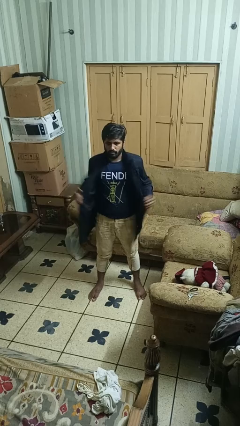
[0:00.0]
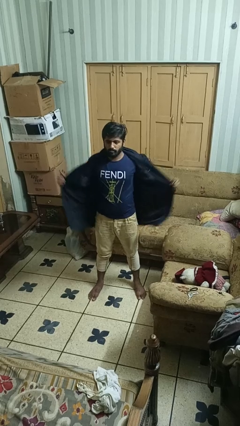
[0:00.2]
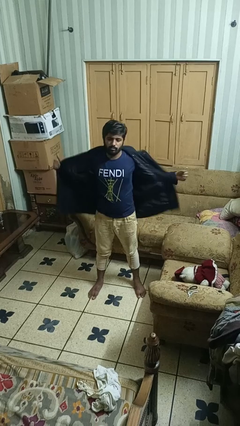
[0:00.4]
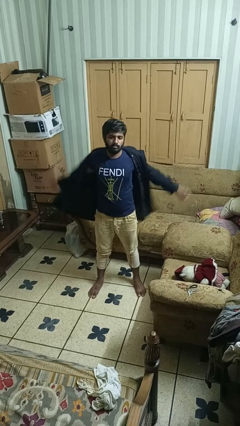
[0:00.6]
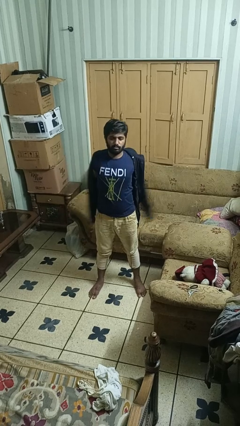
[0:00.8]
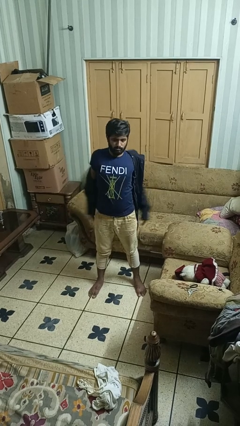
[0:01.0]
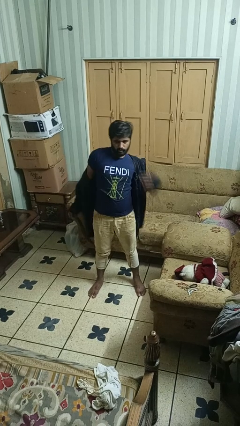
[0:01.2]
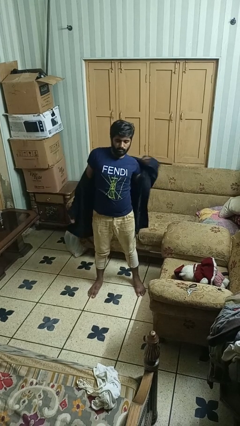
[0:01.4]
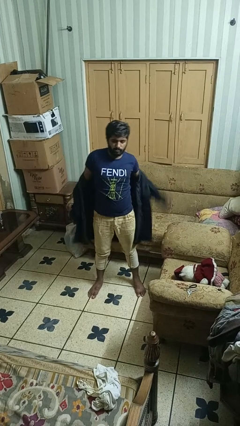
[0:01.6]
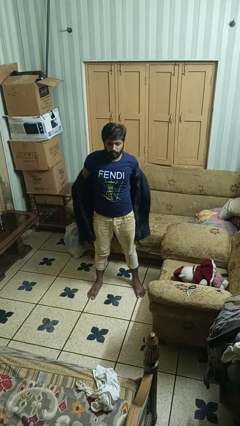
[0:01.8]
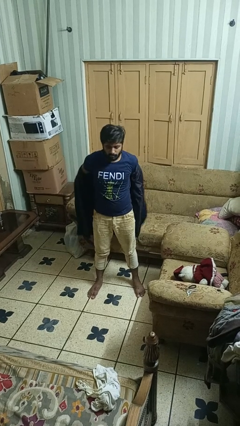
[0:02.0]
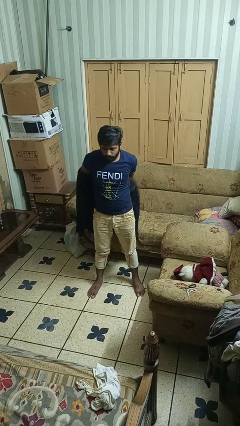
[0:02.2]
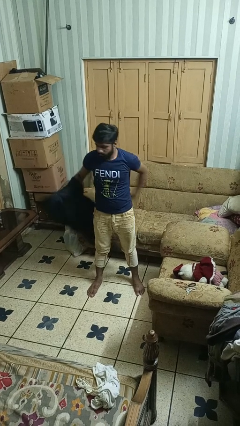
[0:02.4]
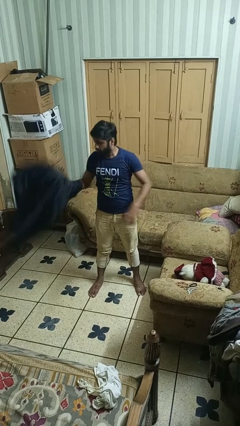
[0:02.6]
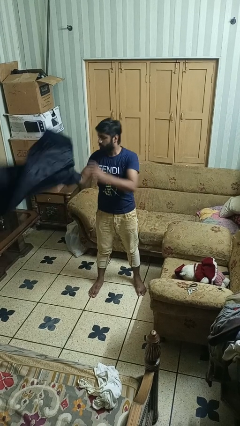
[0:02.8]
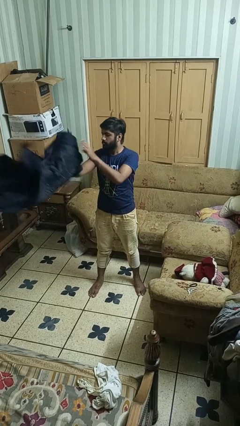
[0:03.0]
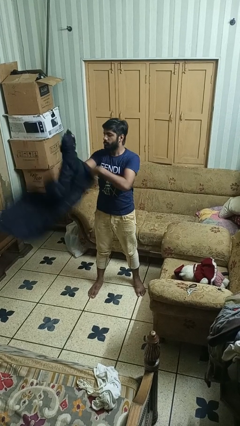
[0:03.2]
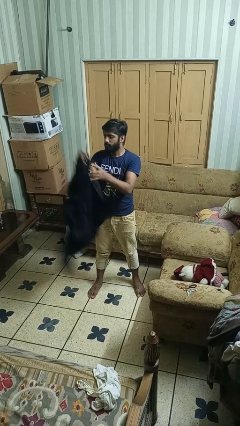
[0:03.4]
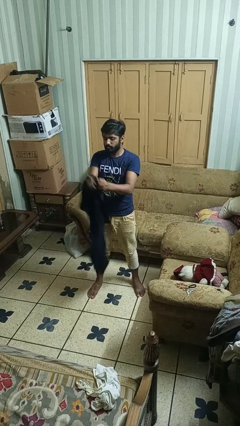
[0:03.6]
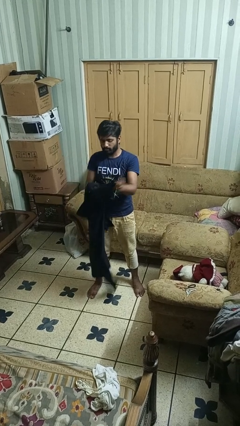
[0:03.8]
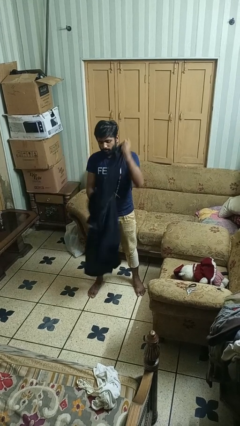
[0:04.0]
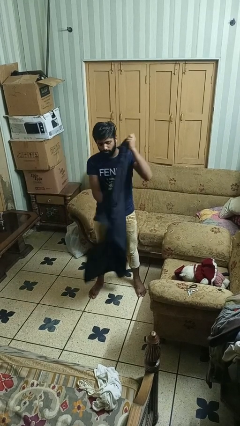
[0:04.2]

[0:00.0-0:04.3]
person takes off jacket

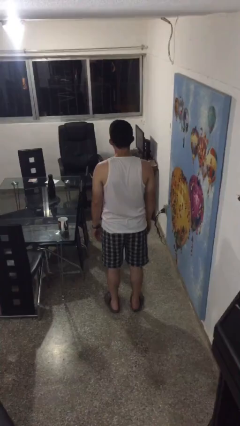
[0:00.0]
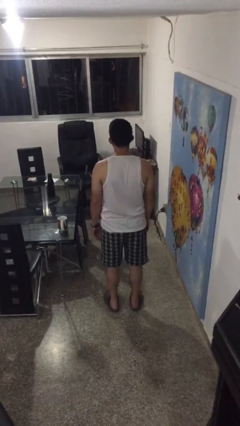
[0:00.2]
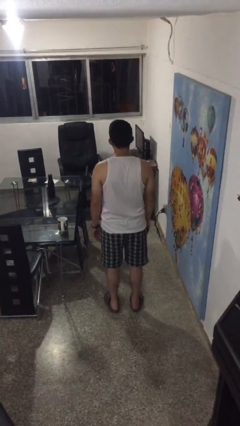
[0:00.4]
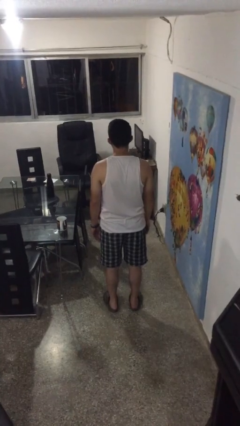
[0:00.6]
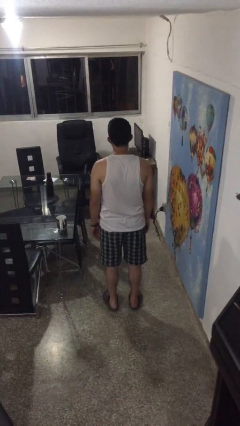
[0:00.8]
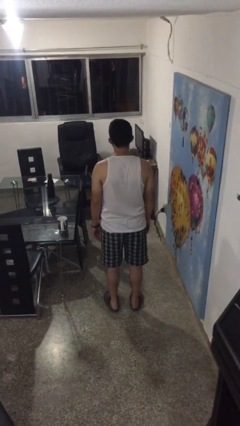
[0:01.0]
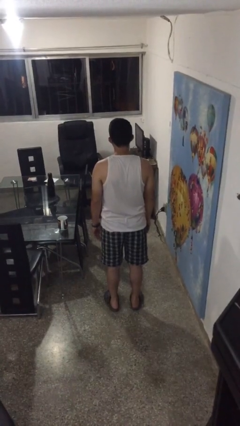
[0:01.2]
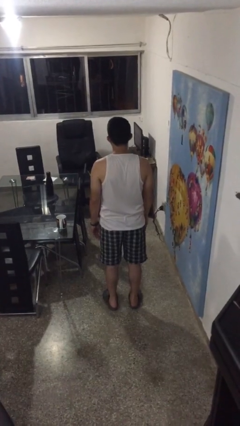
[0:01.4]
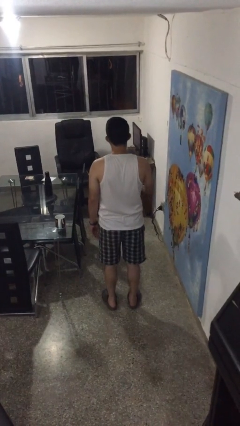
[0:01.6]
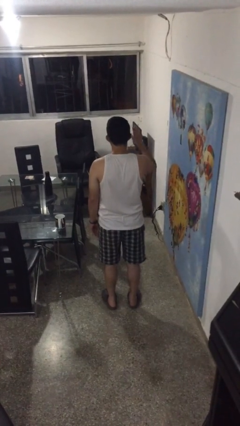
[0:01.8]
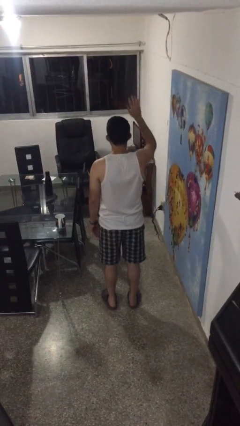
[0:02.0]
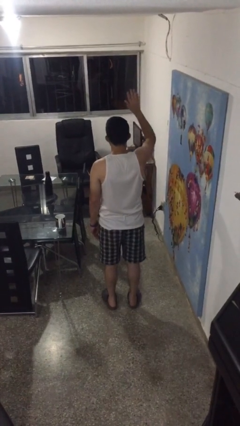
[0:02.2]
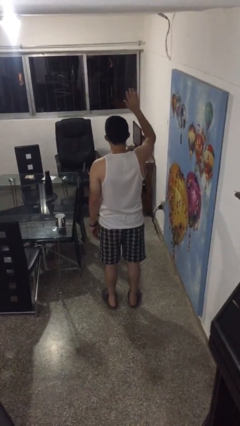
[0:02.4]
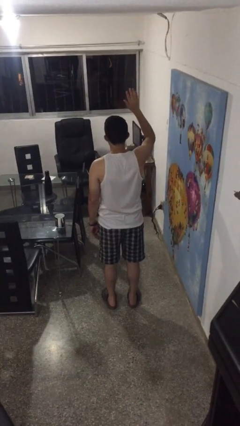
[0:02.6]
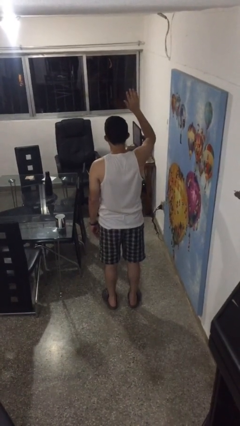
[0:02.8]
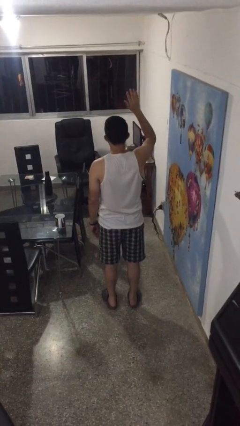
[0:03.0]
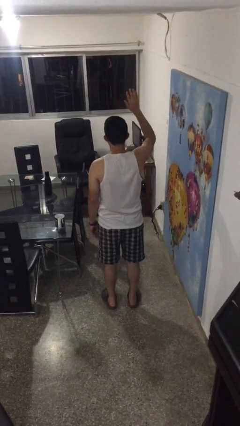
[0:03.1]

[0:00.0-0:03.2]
person gestures raise hand

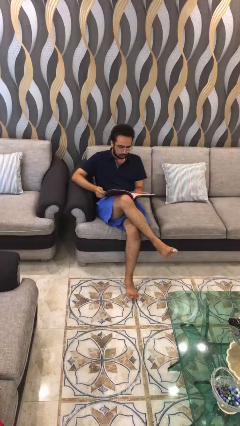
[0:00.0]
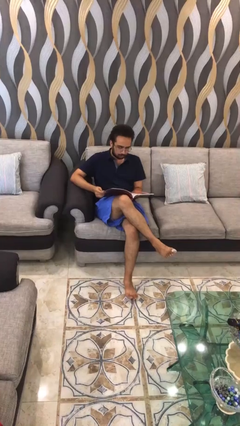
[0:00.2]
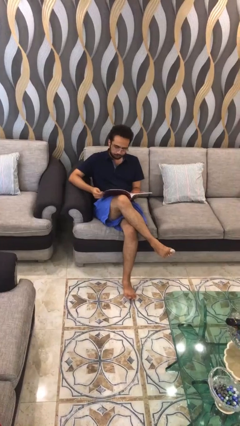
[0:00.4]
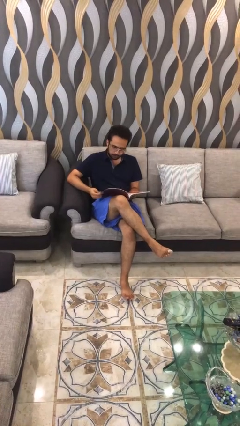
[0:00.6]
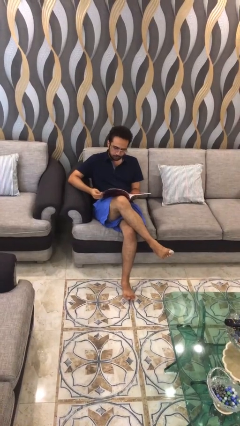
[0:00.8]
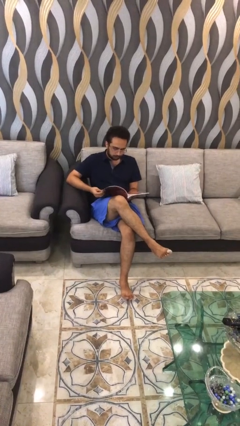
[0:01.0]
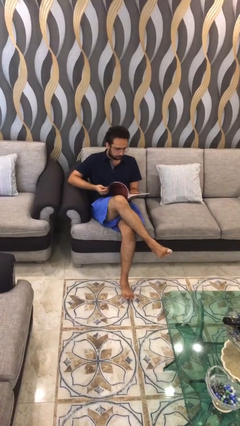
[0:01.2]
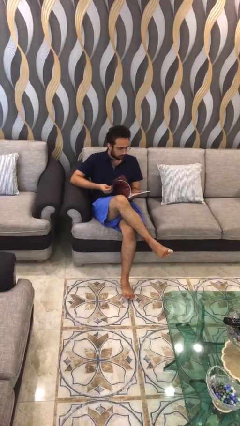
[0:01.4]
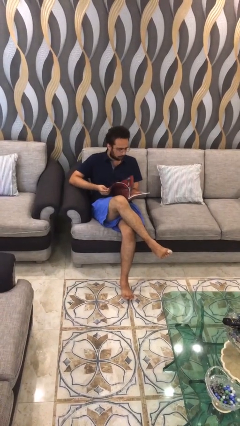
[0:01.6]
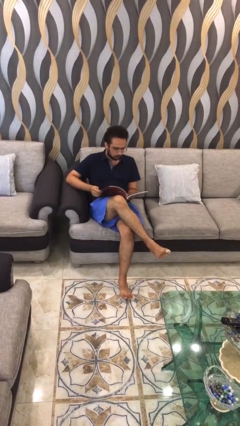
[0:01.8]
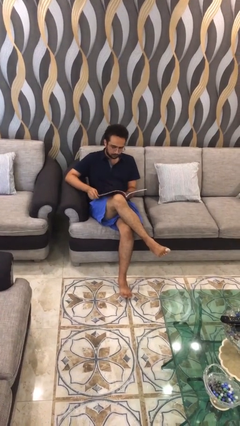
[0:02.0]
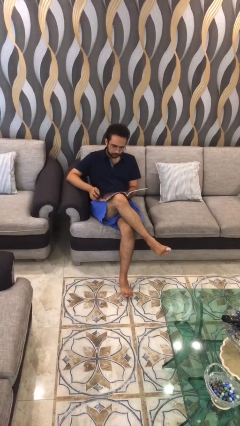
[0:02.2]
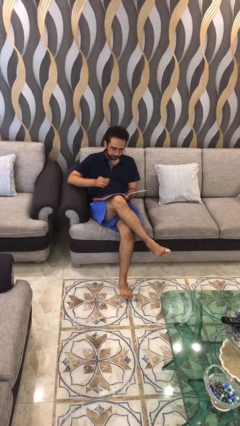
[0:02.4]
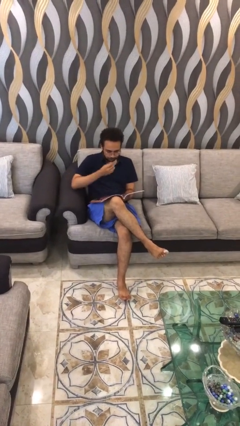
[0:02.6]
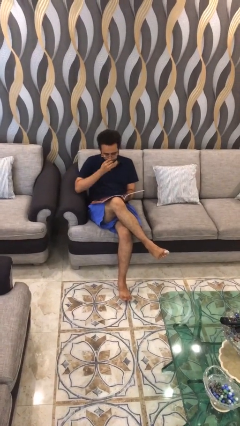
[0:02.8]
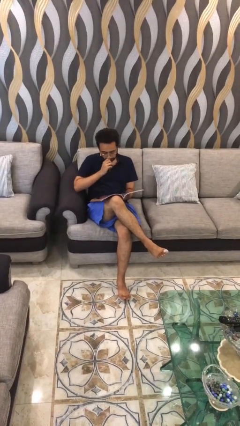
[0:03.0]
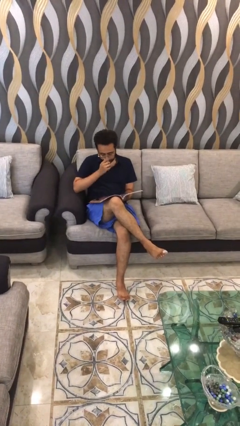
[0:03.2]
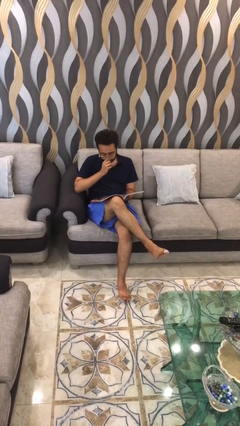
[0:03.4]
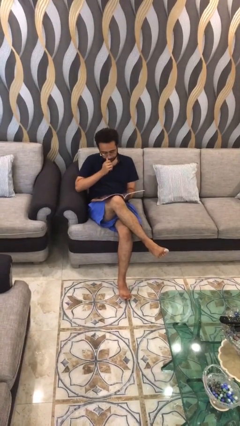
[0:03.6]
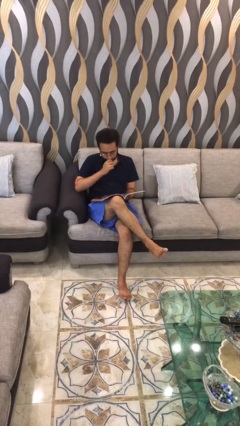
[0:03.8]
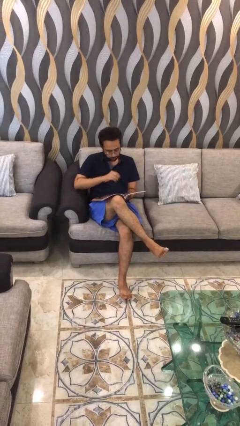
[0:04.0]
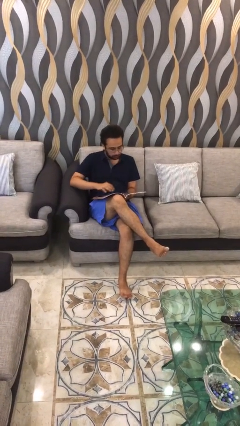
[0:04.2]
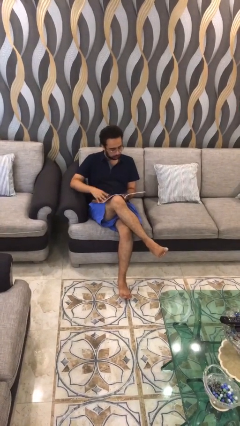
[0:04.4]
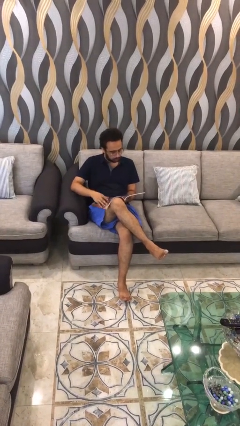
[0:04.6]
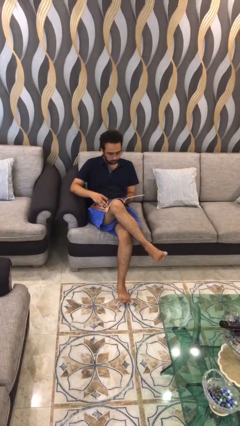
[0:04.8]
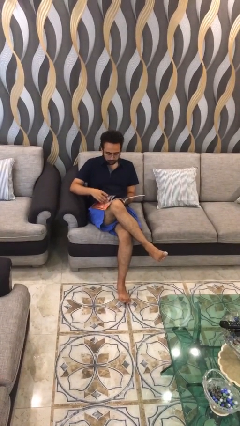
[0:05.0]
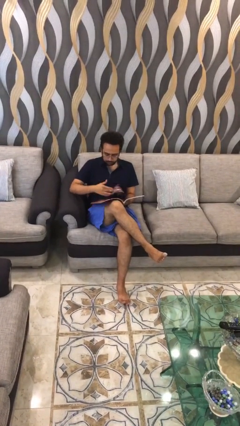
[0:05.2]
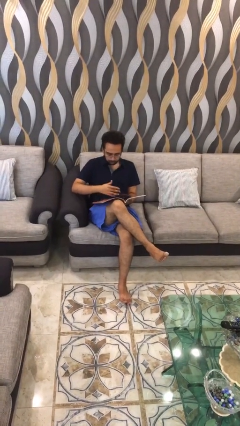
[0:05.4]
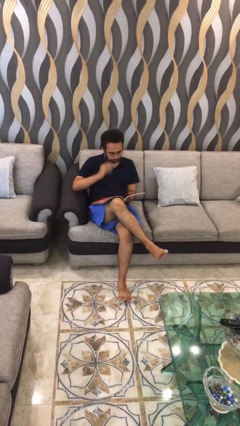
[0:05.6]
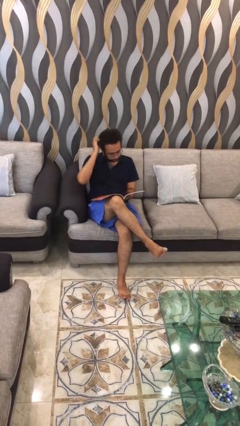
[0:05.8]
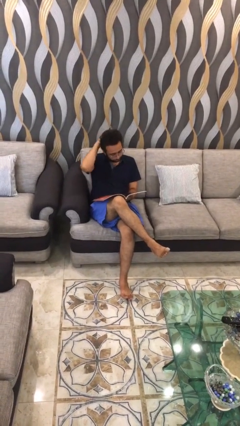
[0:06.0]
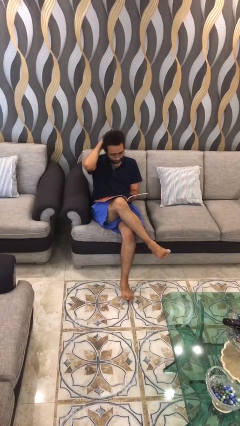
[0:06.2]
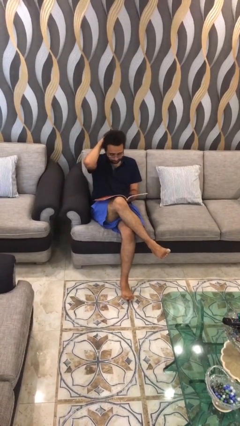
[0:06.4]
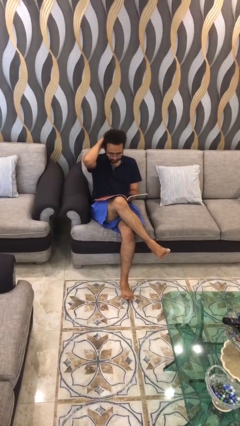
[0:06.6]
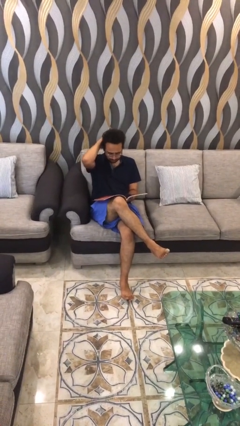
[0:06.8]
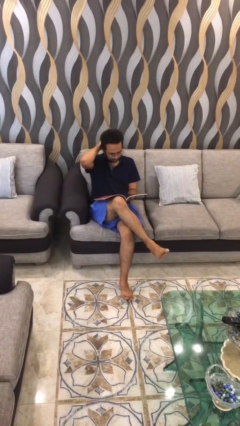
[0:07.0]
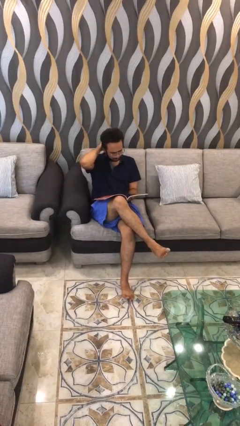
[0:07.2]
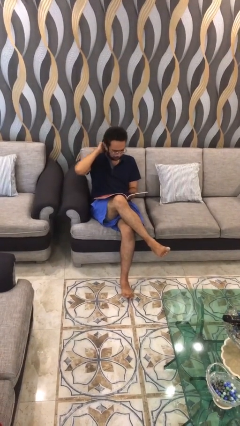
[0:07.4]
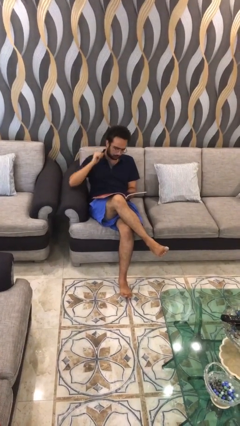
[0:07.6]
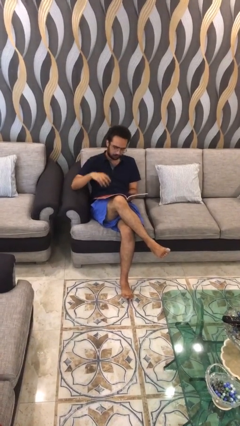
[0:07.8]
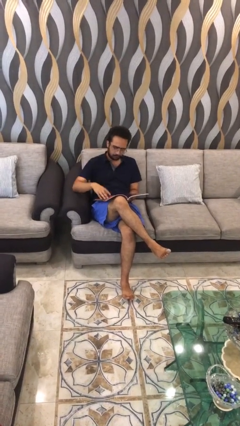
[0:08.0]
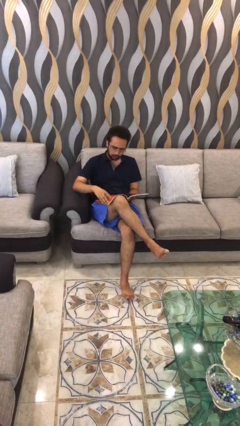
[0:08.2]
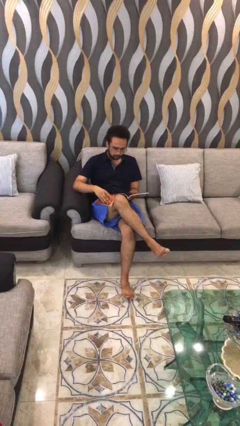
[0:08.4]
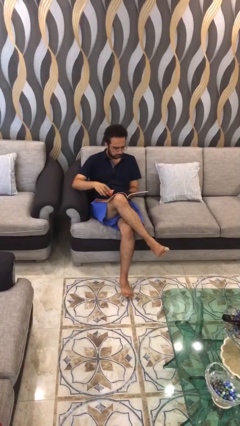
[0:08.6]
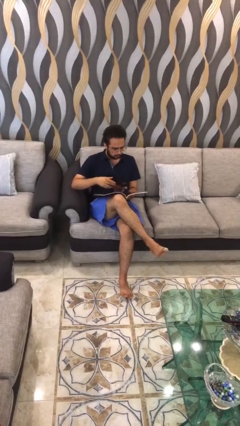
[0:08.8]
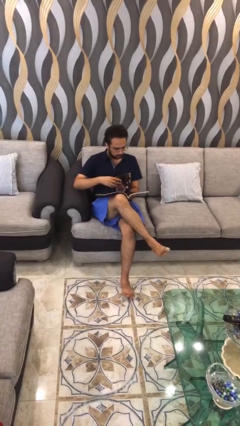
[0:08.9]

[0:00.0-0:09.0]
person reads document

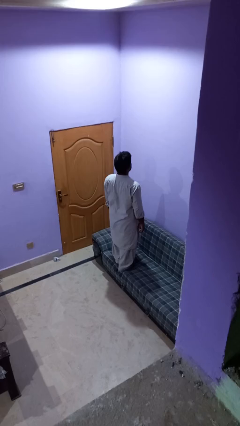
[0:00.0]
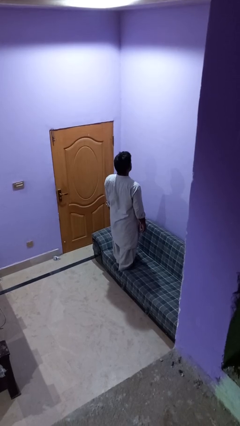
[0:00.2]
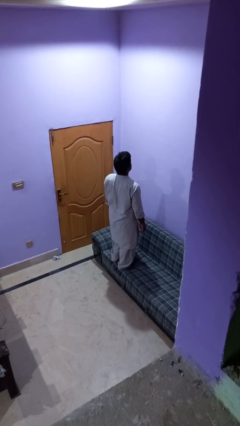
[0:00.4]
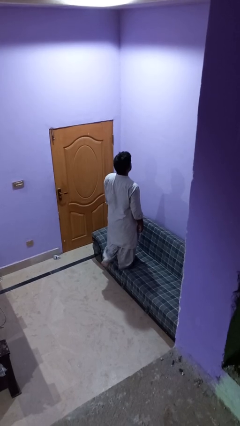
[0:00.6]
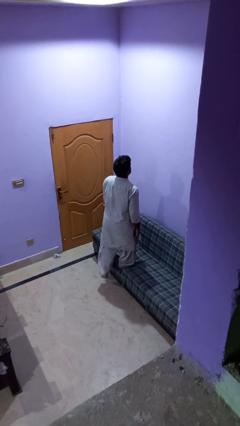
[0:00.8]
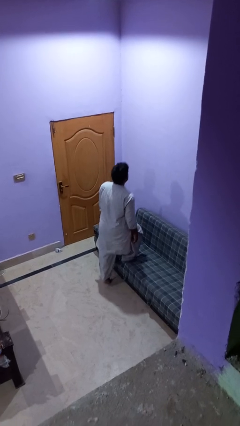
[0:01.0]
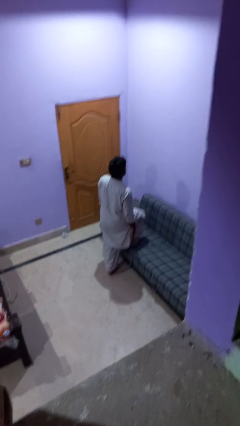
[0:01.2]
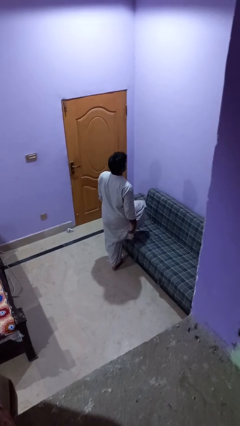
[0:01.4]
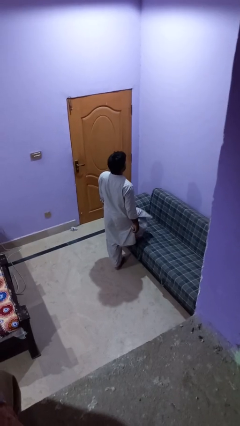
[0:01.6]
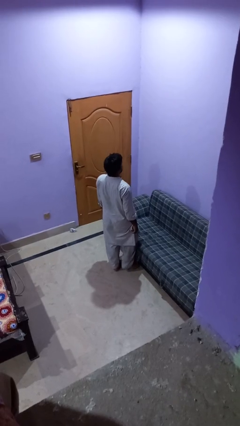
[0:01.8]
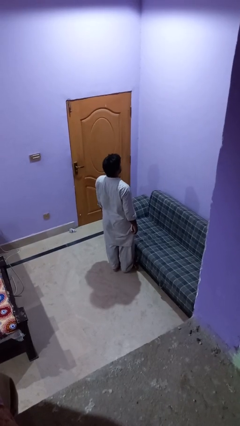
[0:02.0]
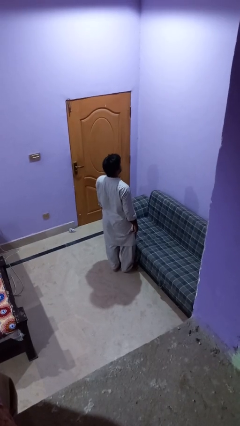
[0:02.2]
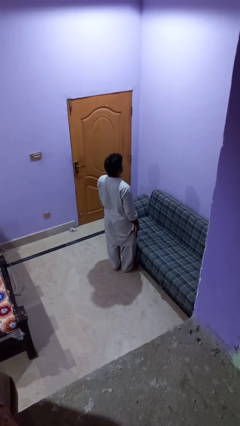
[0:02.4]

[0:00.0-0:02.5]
person climbs off couch
